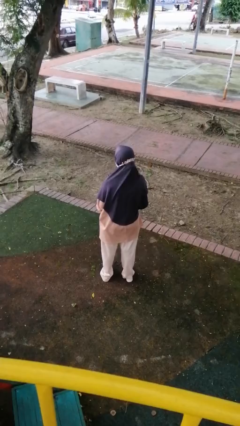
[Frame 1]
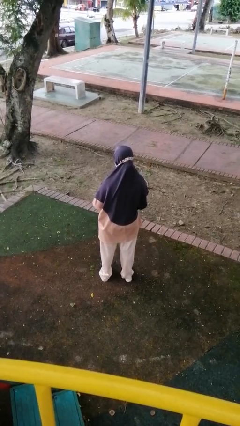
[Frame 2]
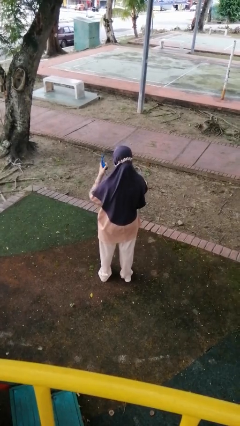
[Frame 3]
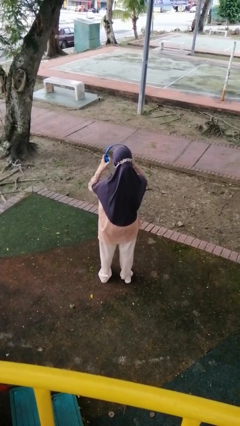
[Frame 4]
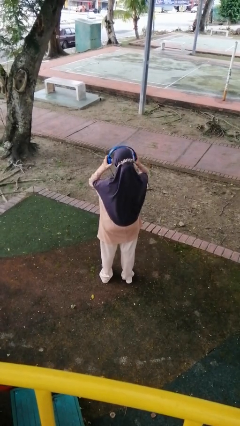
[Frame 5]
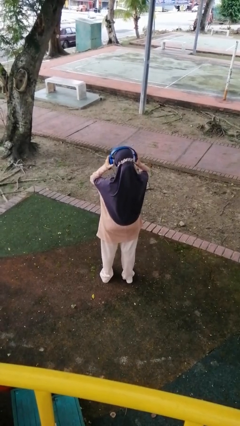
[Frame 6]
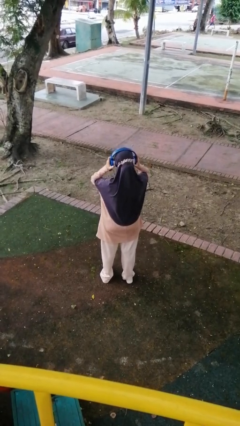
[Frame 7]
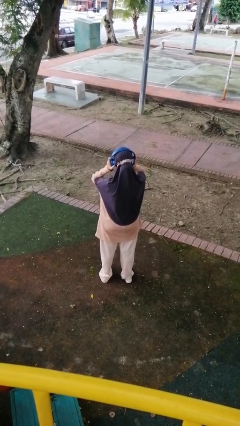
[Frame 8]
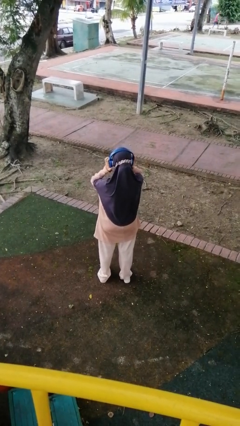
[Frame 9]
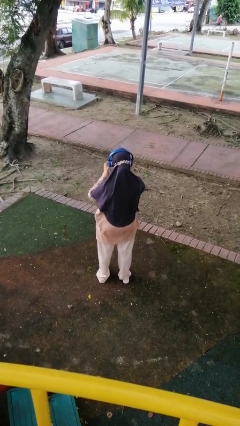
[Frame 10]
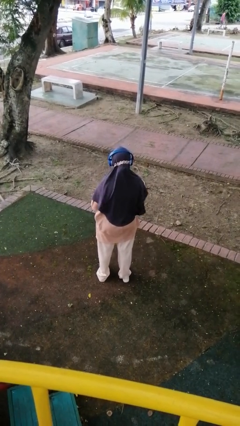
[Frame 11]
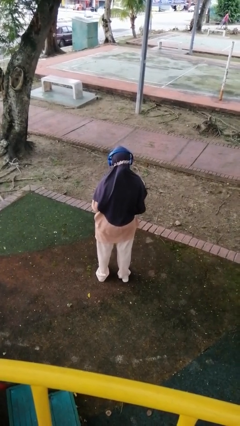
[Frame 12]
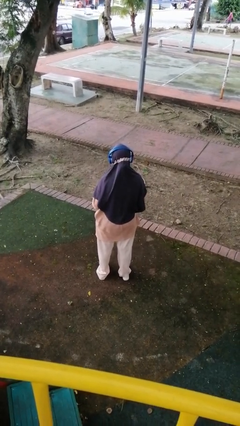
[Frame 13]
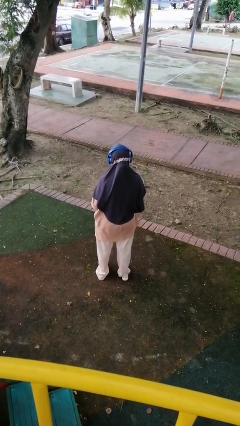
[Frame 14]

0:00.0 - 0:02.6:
person puts on headphones

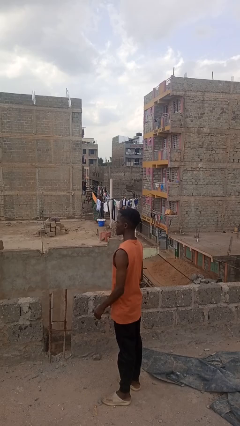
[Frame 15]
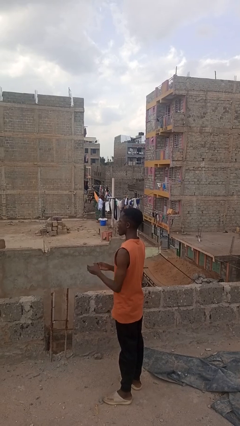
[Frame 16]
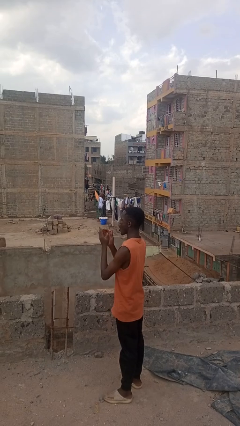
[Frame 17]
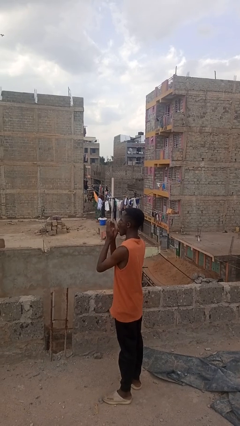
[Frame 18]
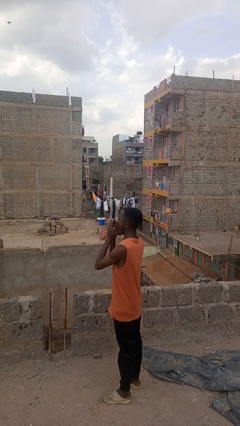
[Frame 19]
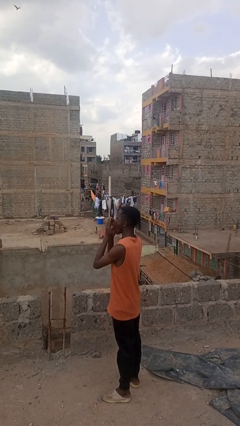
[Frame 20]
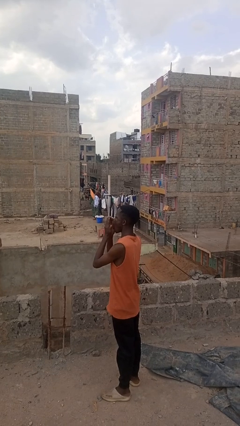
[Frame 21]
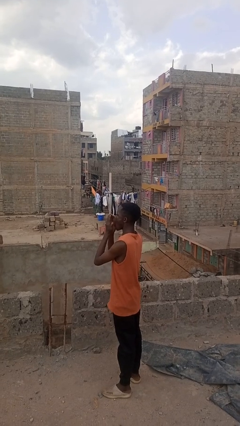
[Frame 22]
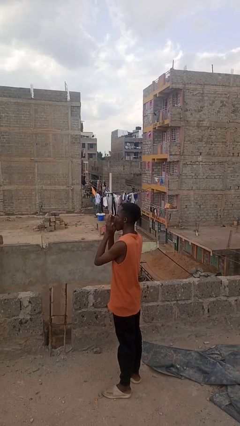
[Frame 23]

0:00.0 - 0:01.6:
person blows into hands

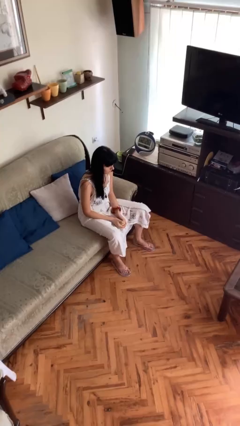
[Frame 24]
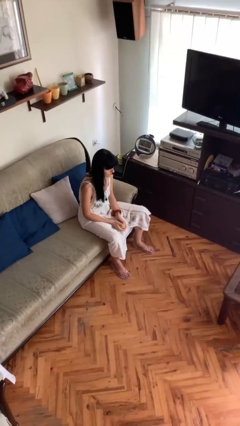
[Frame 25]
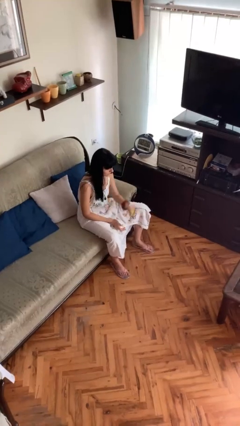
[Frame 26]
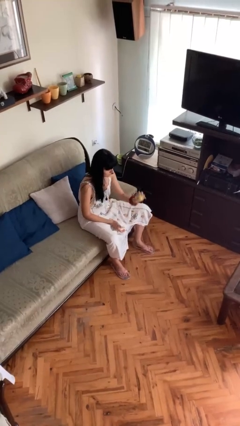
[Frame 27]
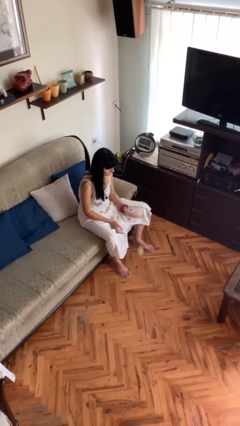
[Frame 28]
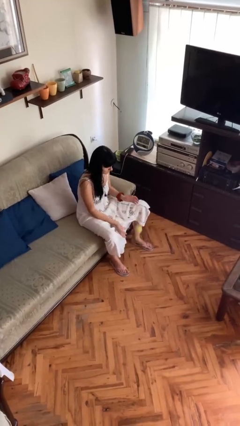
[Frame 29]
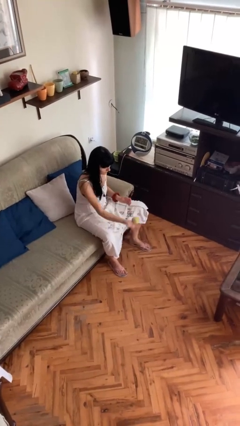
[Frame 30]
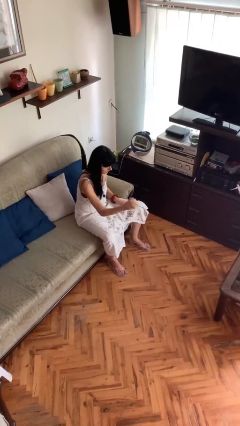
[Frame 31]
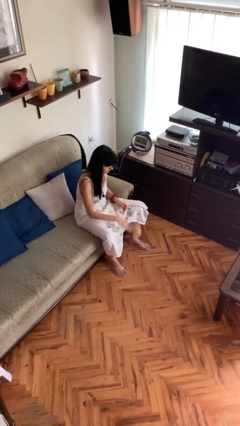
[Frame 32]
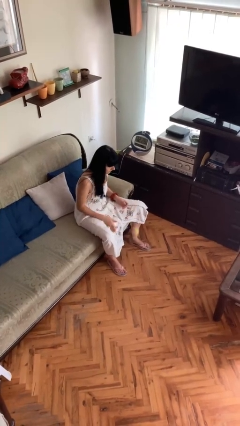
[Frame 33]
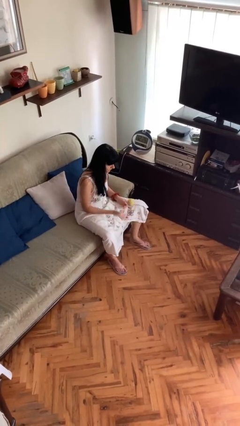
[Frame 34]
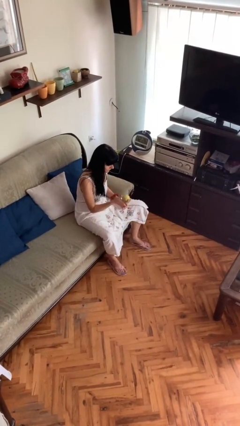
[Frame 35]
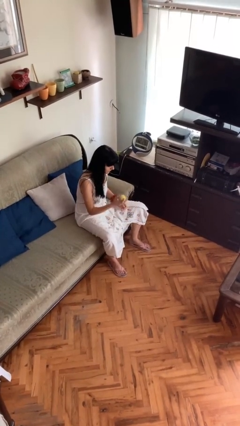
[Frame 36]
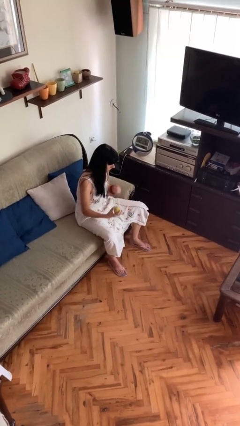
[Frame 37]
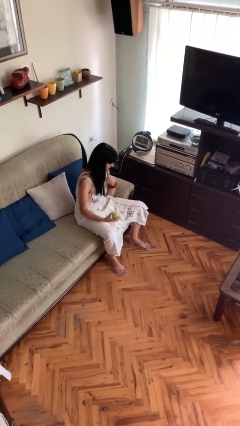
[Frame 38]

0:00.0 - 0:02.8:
person bounces ball on floor

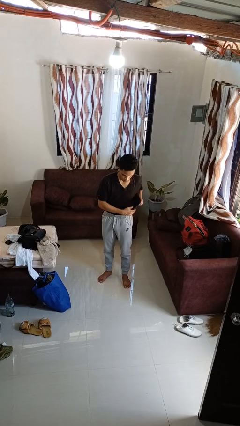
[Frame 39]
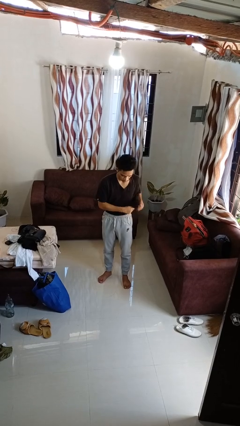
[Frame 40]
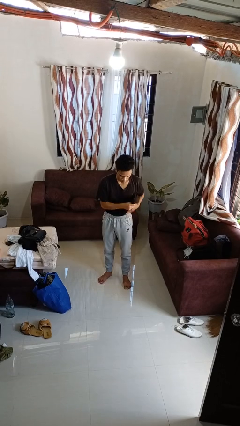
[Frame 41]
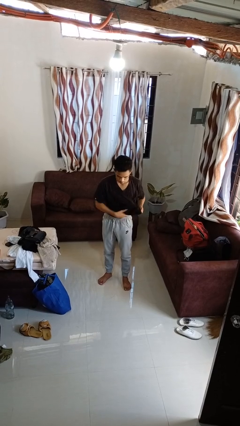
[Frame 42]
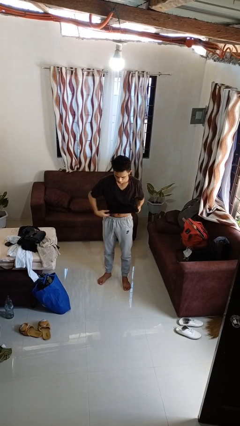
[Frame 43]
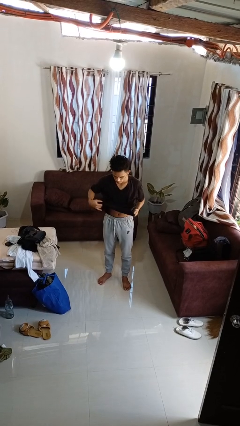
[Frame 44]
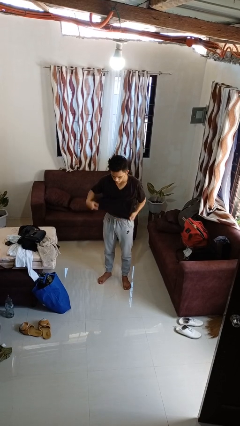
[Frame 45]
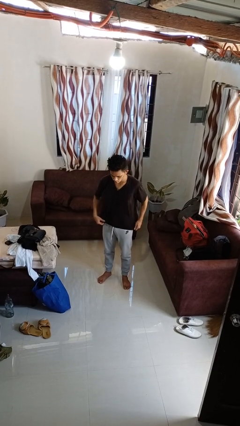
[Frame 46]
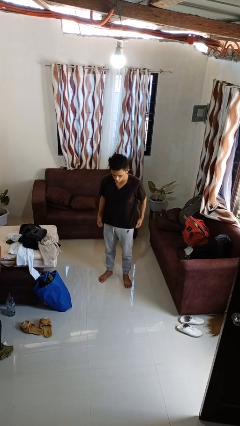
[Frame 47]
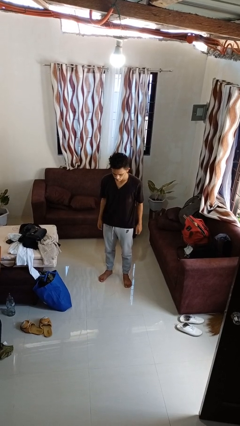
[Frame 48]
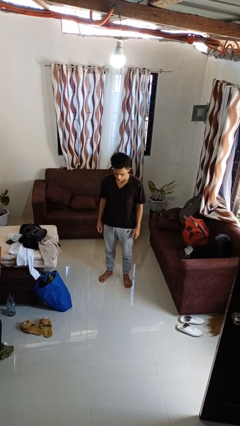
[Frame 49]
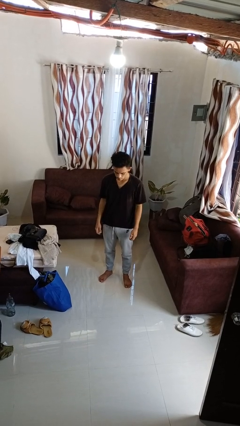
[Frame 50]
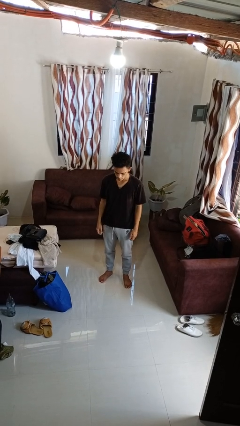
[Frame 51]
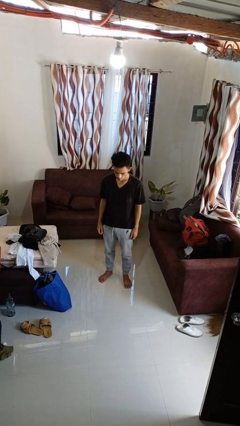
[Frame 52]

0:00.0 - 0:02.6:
person untucks shirt

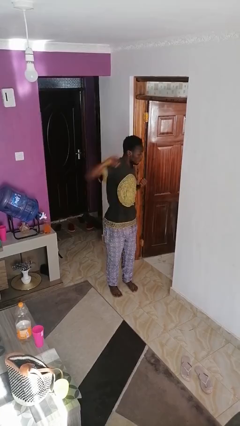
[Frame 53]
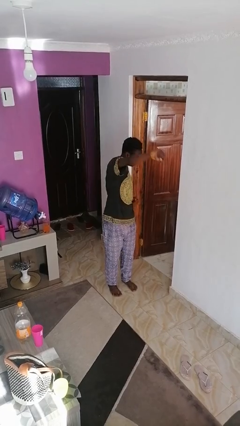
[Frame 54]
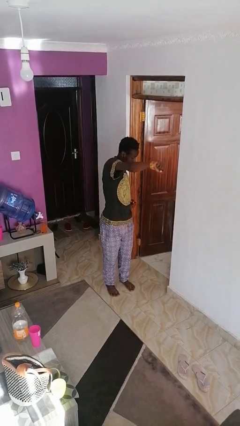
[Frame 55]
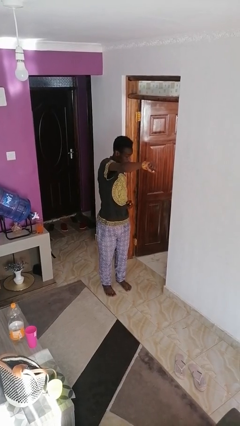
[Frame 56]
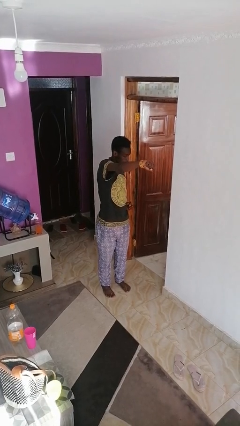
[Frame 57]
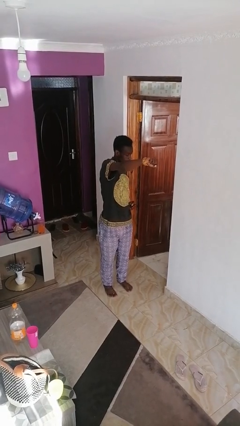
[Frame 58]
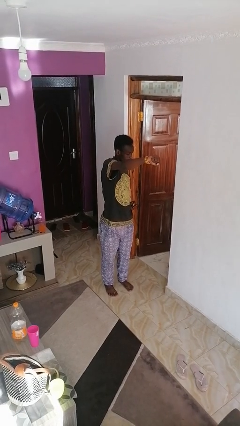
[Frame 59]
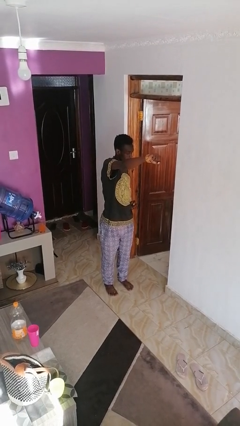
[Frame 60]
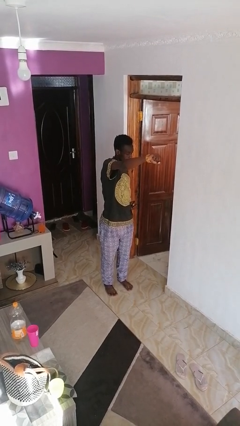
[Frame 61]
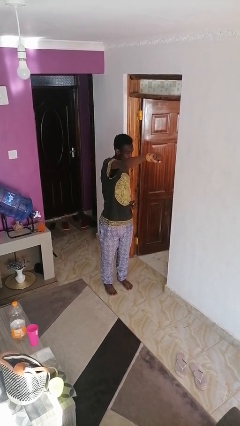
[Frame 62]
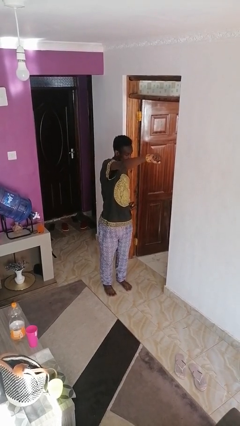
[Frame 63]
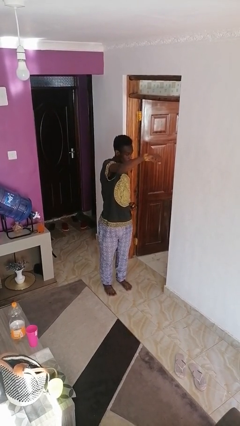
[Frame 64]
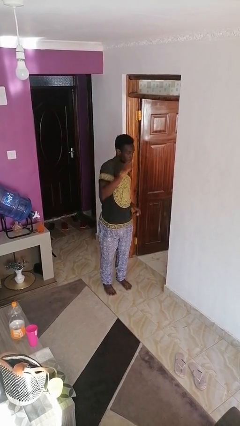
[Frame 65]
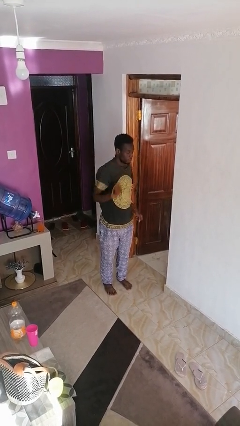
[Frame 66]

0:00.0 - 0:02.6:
person punches

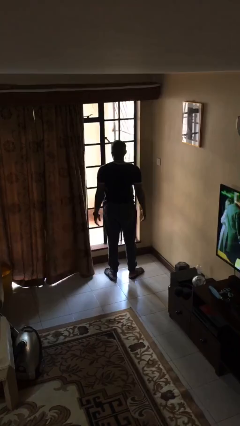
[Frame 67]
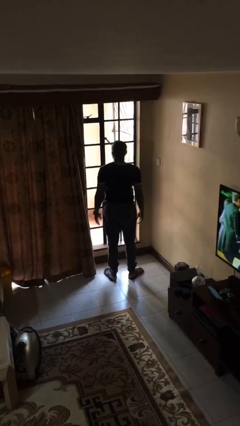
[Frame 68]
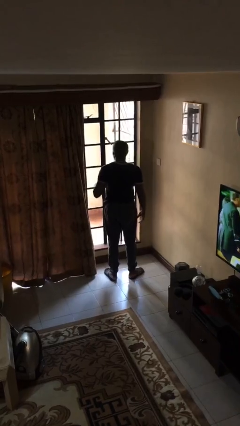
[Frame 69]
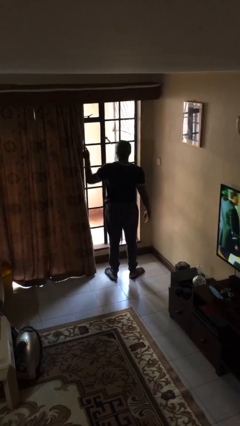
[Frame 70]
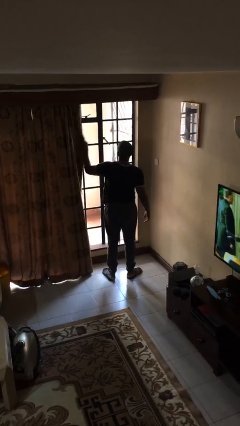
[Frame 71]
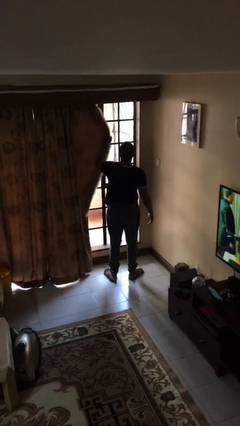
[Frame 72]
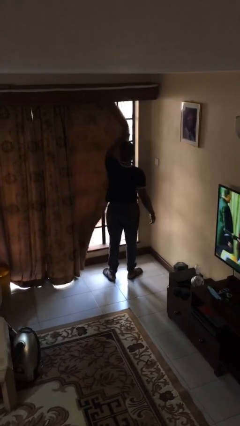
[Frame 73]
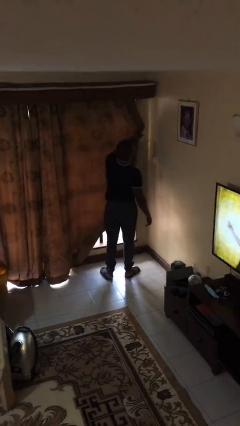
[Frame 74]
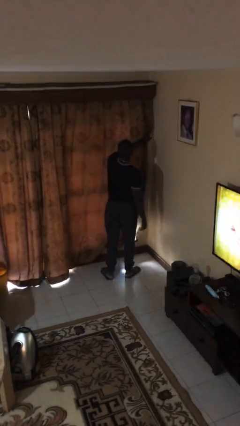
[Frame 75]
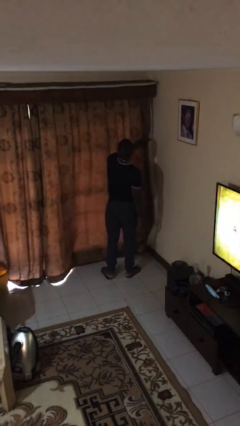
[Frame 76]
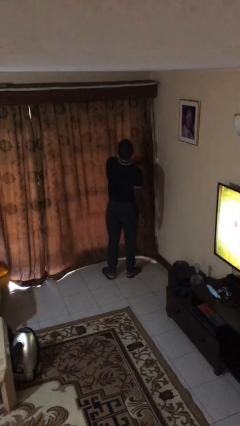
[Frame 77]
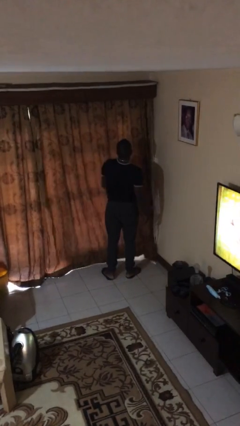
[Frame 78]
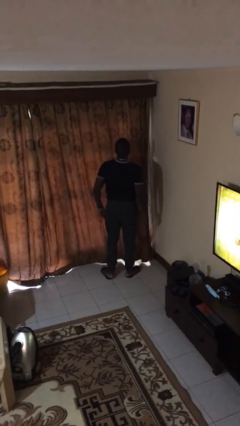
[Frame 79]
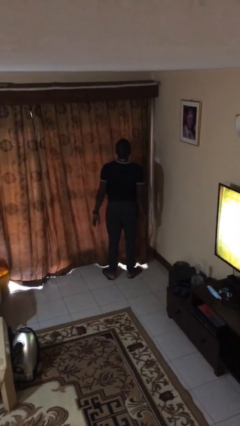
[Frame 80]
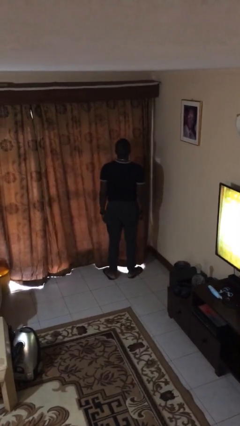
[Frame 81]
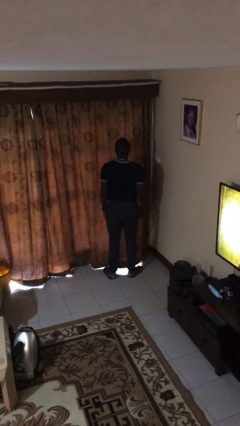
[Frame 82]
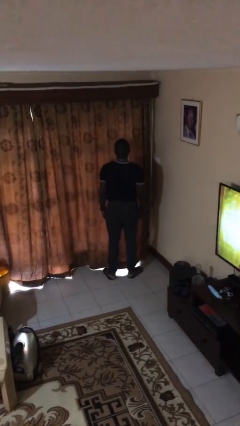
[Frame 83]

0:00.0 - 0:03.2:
person closes curtains

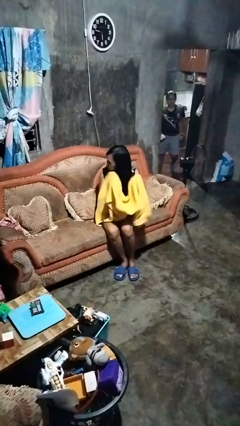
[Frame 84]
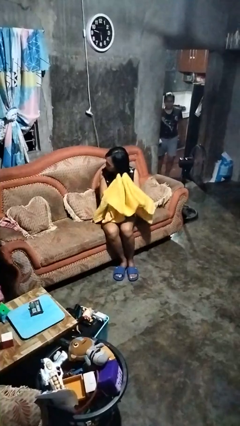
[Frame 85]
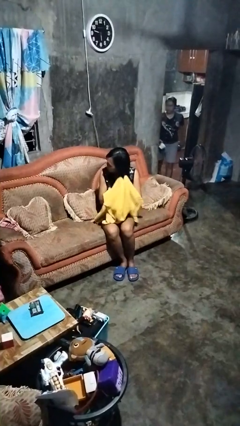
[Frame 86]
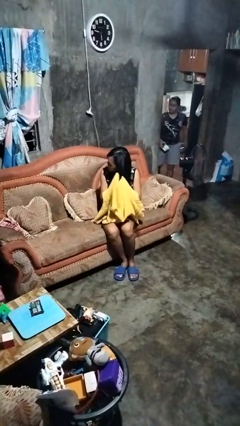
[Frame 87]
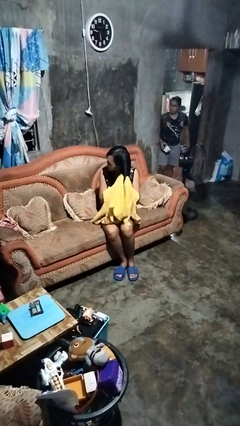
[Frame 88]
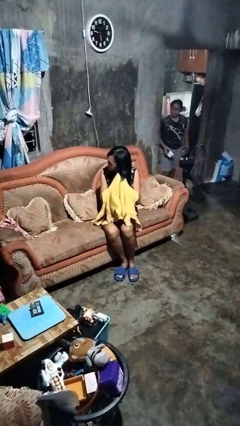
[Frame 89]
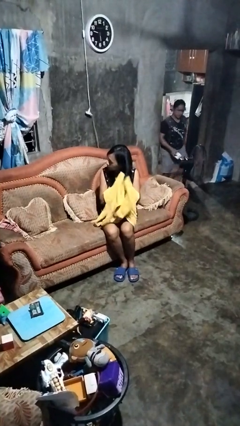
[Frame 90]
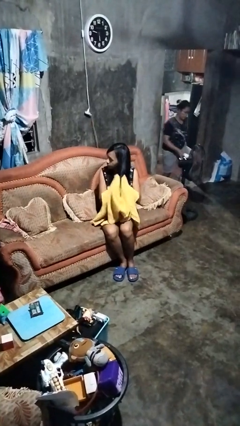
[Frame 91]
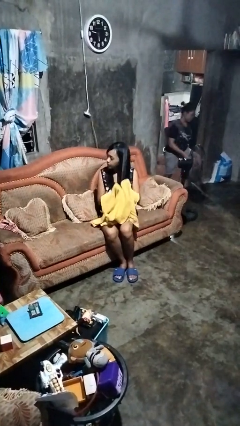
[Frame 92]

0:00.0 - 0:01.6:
person dries hair with towel
